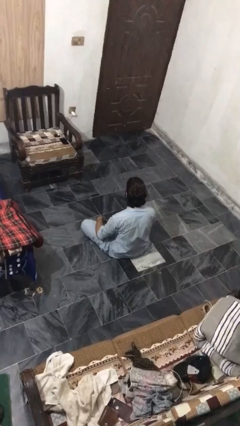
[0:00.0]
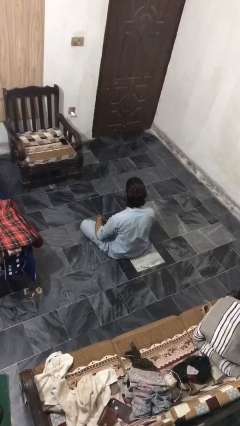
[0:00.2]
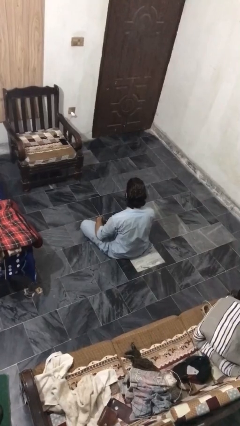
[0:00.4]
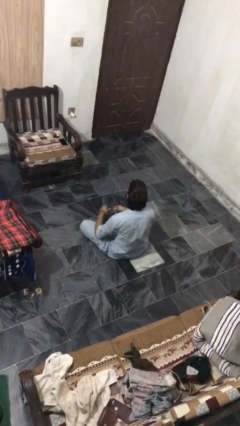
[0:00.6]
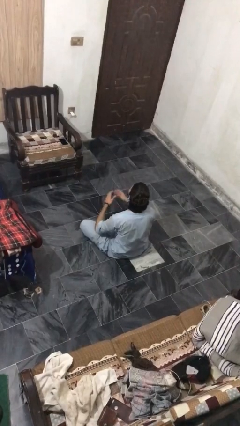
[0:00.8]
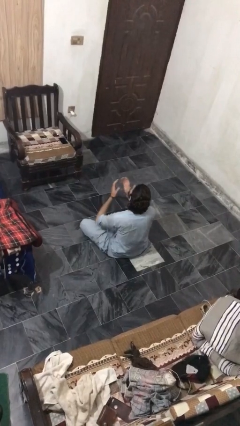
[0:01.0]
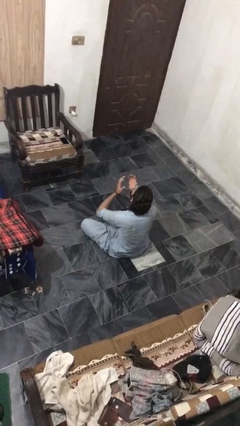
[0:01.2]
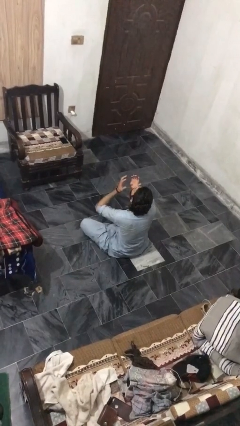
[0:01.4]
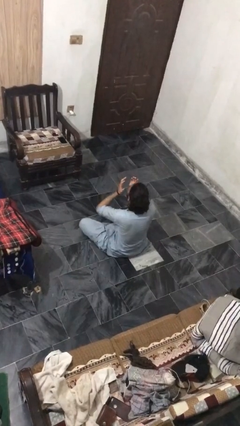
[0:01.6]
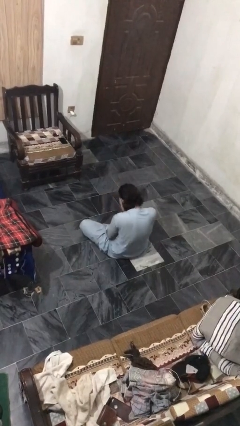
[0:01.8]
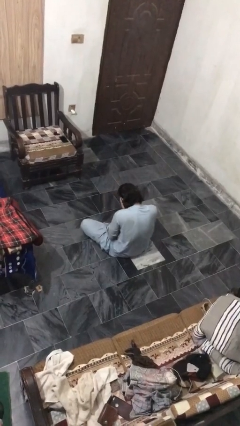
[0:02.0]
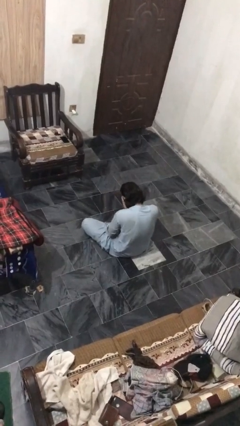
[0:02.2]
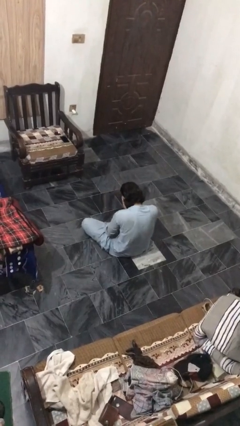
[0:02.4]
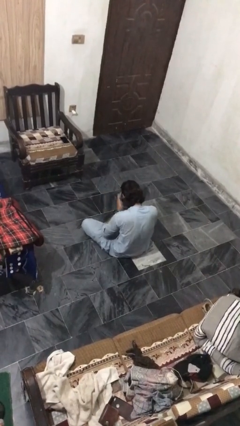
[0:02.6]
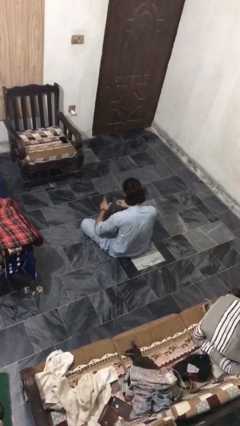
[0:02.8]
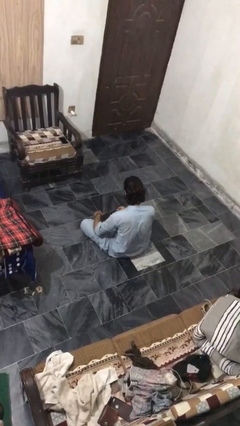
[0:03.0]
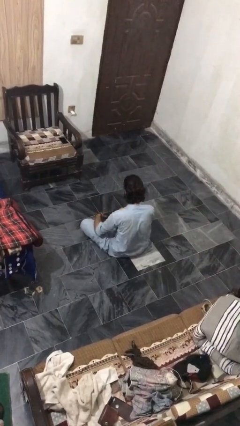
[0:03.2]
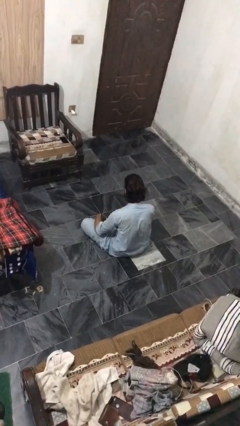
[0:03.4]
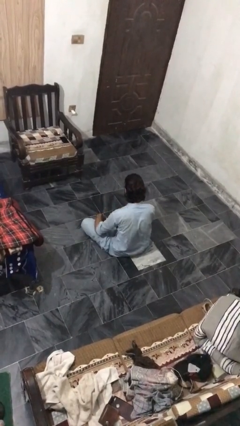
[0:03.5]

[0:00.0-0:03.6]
person sneezes into hand

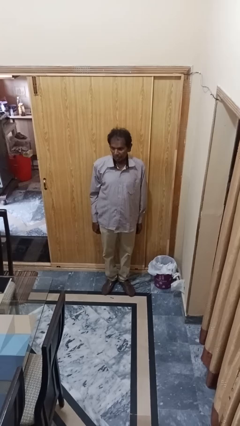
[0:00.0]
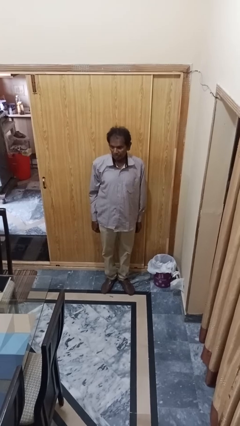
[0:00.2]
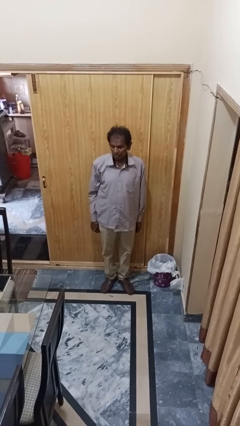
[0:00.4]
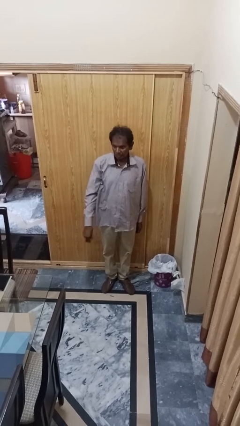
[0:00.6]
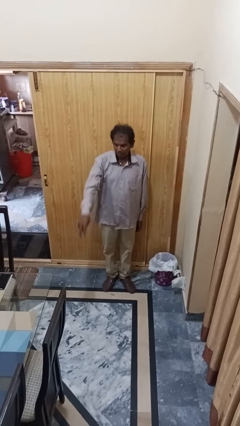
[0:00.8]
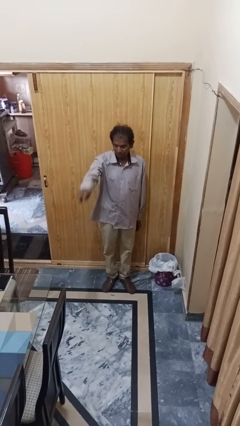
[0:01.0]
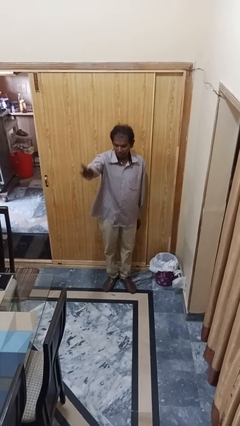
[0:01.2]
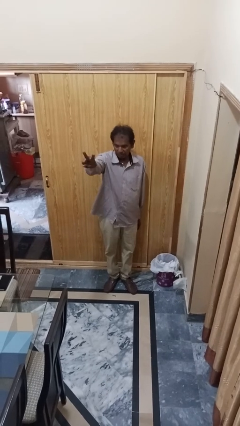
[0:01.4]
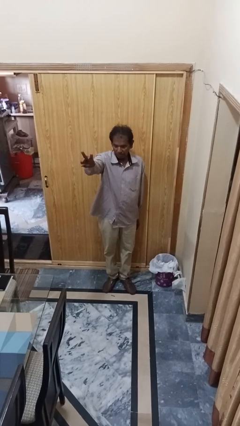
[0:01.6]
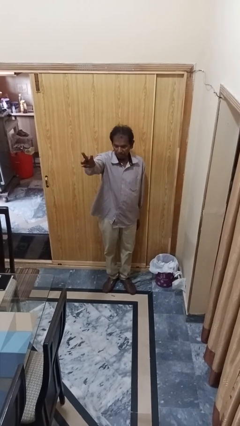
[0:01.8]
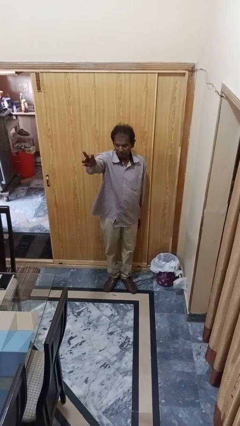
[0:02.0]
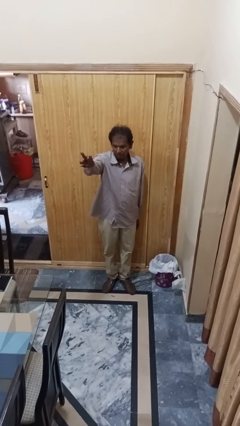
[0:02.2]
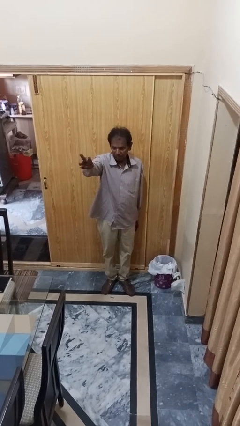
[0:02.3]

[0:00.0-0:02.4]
person gestures peace

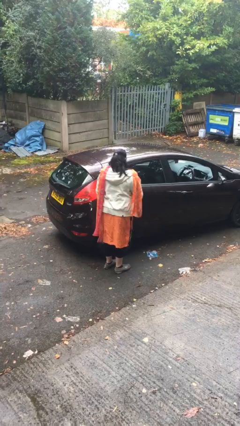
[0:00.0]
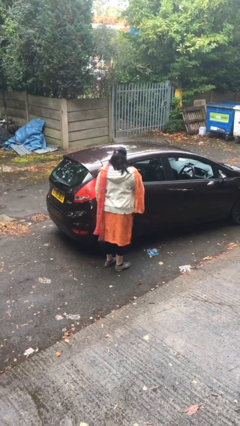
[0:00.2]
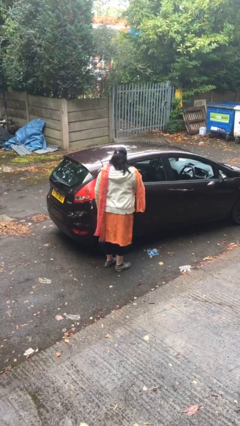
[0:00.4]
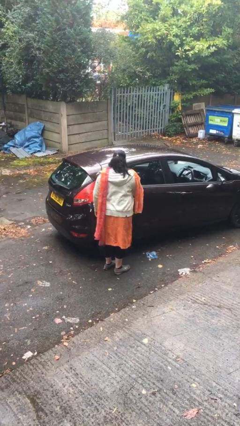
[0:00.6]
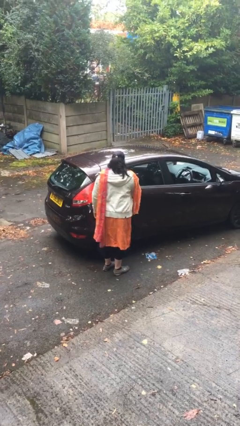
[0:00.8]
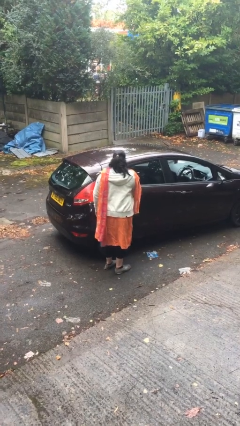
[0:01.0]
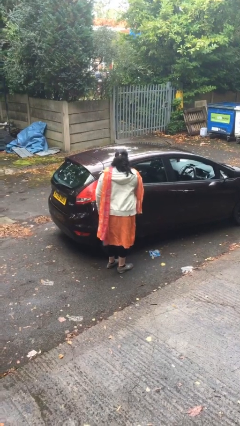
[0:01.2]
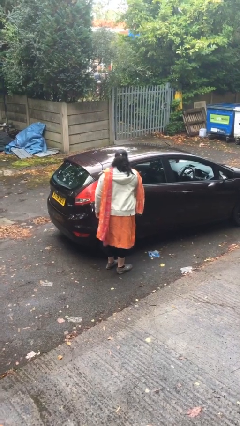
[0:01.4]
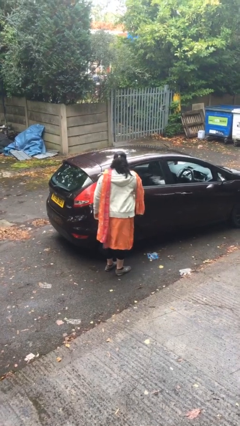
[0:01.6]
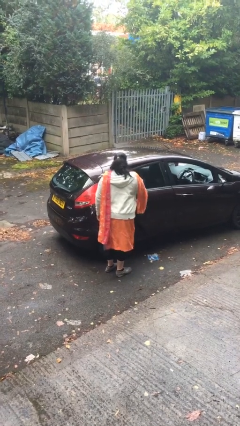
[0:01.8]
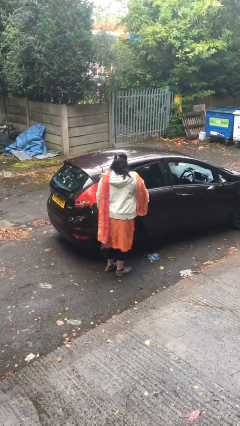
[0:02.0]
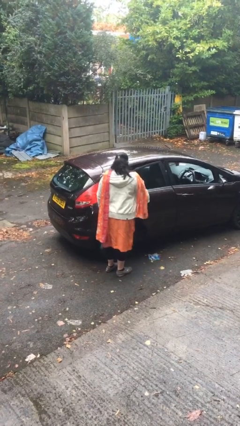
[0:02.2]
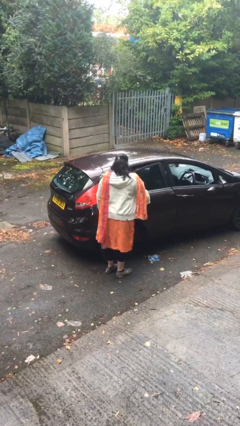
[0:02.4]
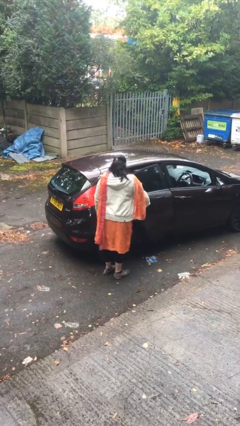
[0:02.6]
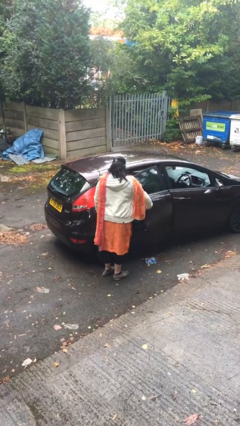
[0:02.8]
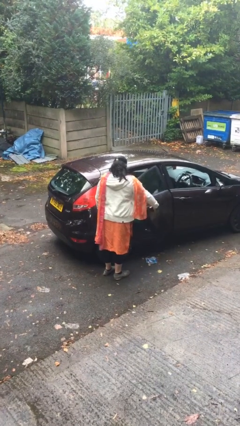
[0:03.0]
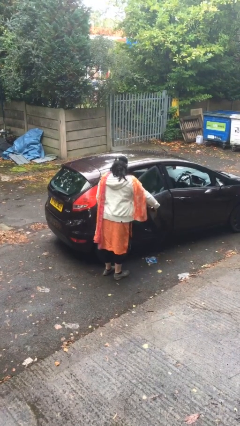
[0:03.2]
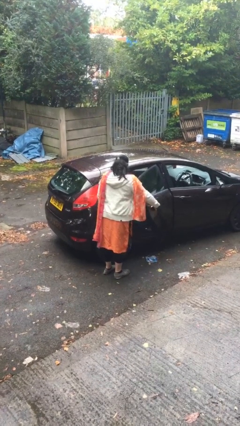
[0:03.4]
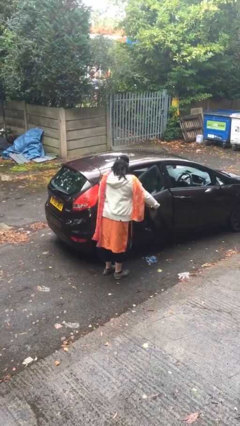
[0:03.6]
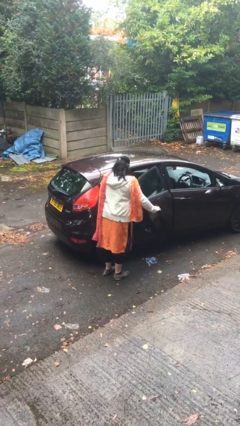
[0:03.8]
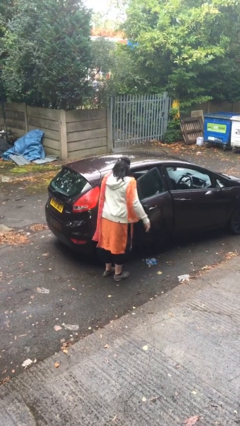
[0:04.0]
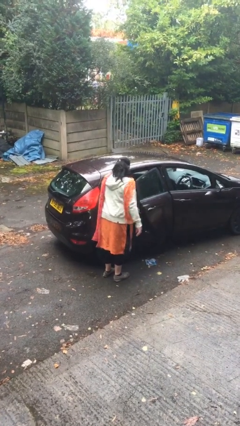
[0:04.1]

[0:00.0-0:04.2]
person opens car door

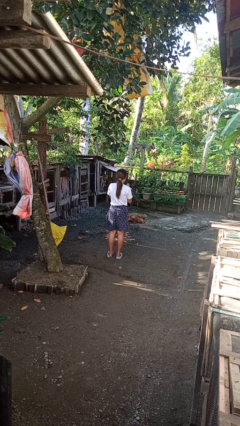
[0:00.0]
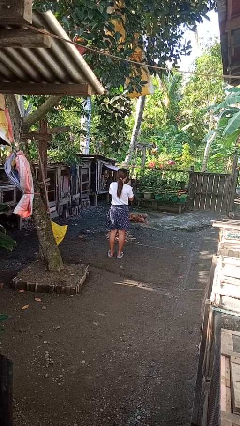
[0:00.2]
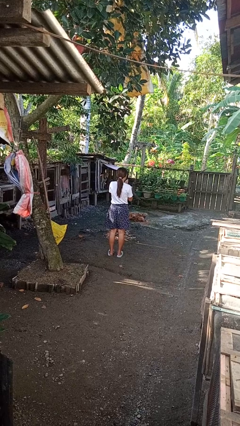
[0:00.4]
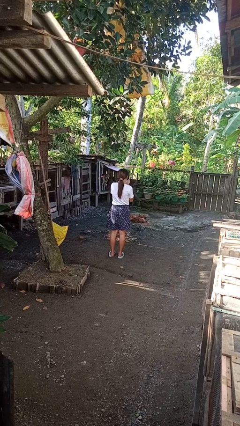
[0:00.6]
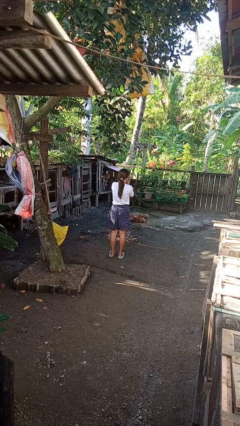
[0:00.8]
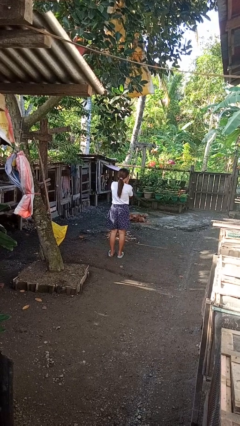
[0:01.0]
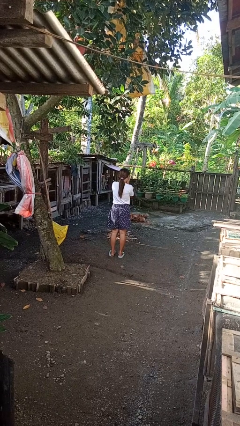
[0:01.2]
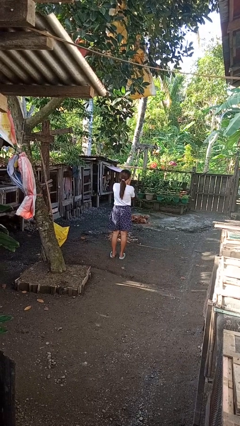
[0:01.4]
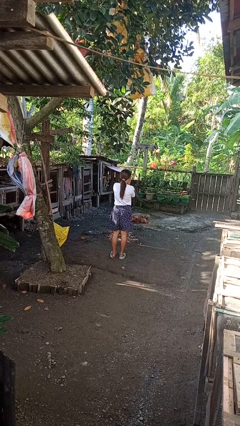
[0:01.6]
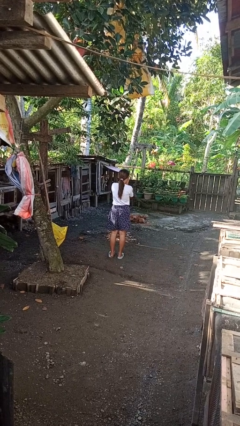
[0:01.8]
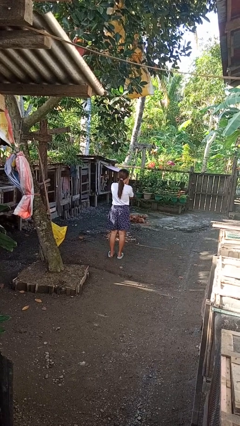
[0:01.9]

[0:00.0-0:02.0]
person blows into hands

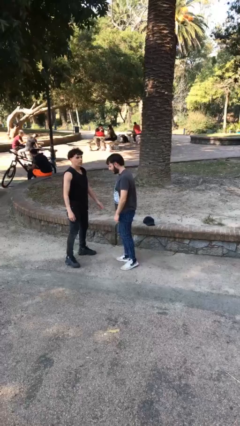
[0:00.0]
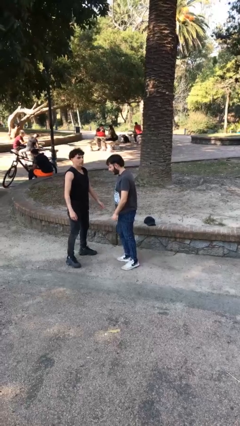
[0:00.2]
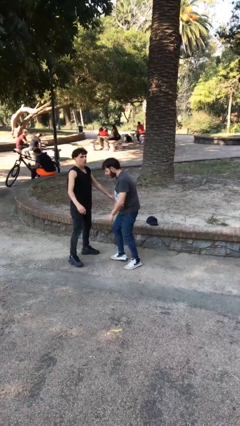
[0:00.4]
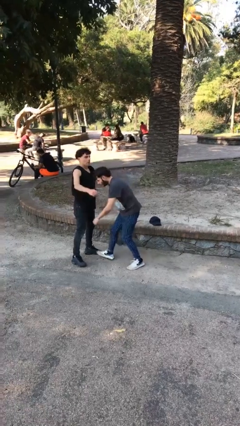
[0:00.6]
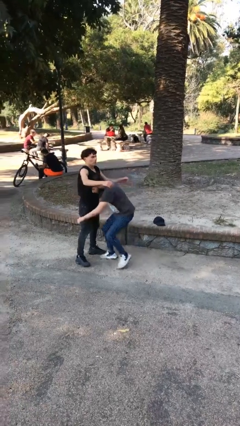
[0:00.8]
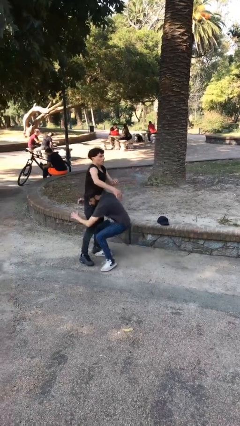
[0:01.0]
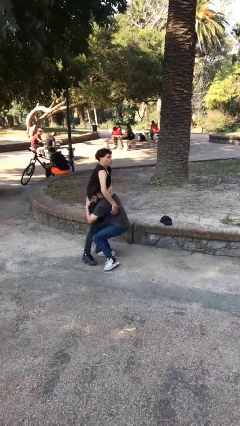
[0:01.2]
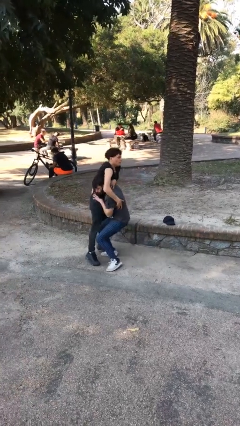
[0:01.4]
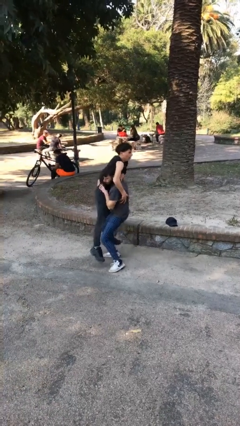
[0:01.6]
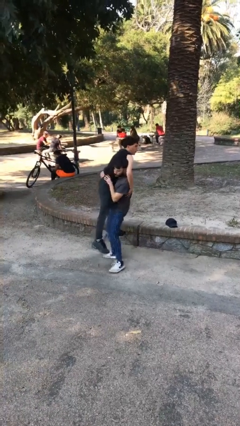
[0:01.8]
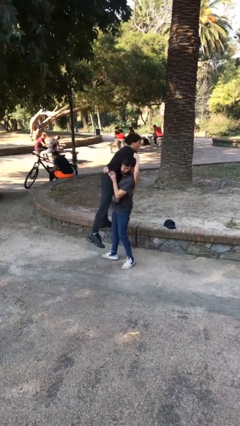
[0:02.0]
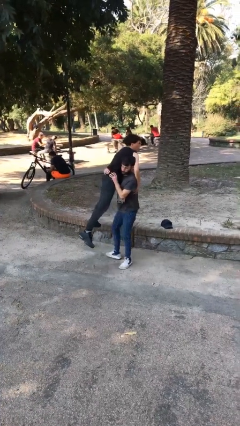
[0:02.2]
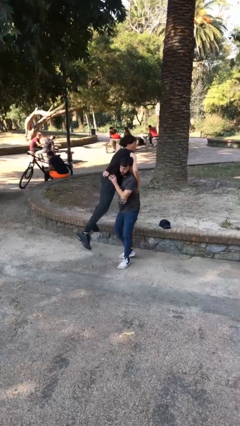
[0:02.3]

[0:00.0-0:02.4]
person picks up person

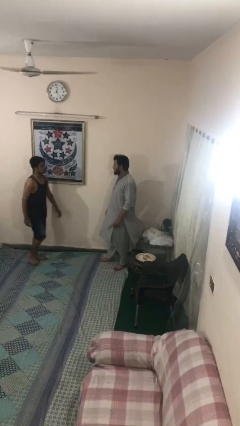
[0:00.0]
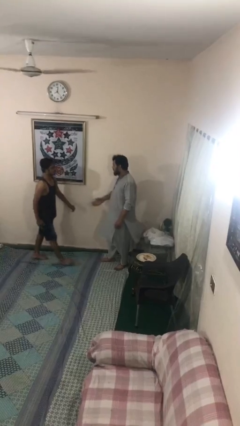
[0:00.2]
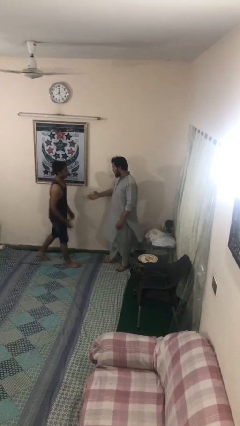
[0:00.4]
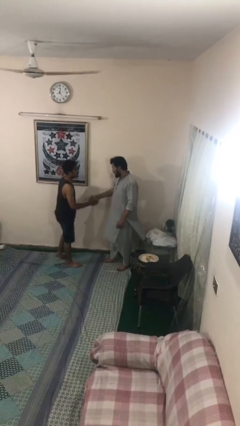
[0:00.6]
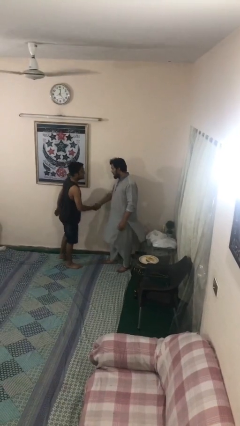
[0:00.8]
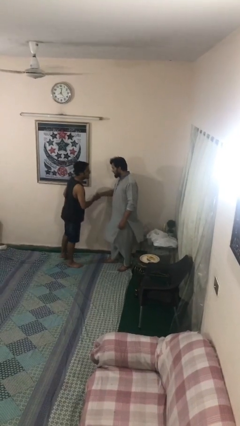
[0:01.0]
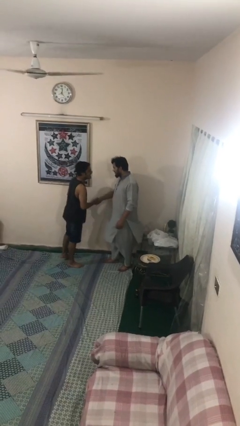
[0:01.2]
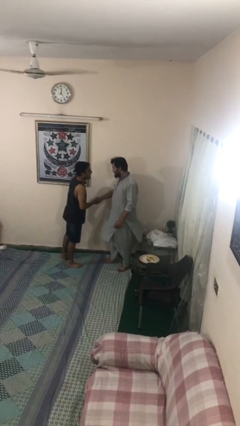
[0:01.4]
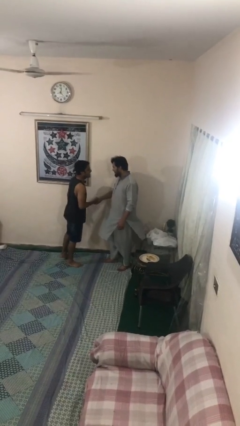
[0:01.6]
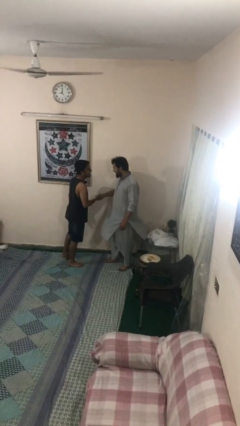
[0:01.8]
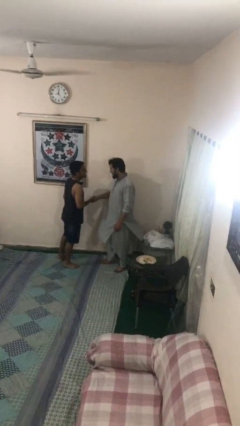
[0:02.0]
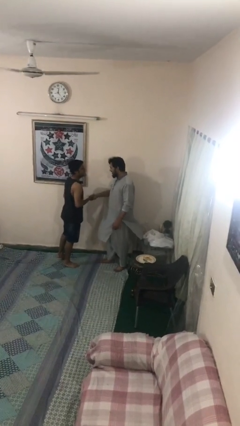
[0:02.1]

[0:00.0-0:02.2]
person shakes hand
